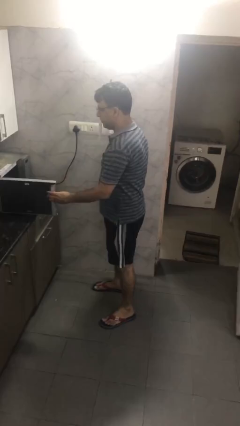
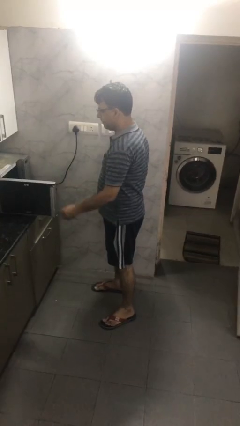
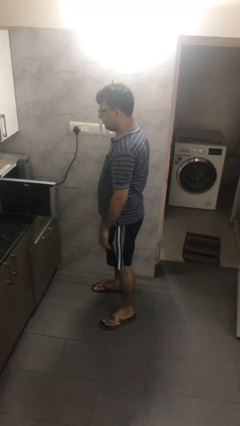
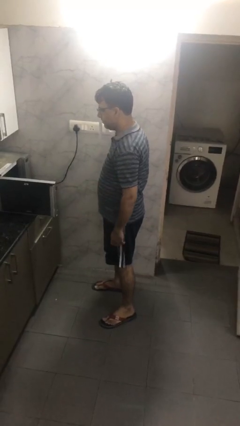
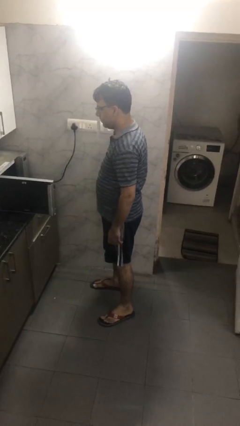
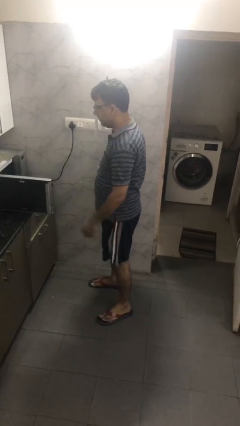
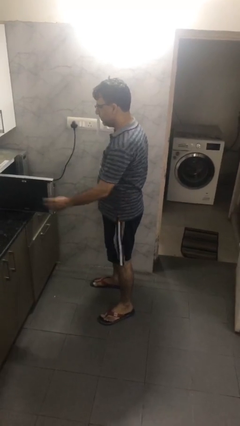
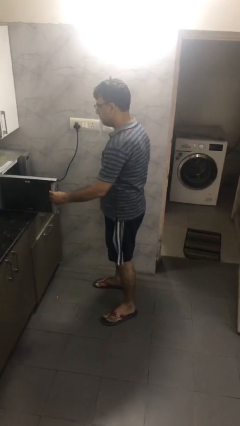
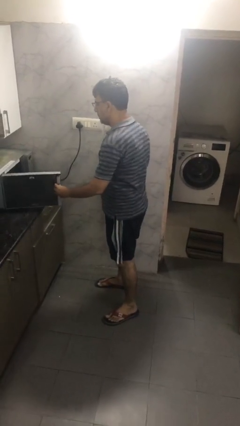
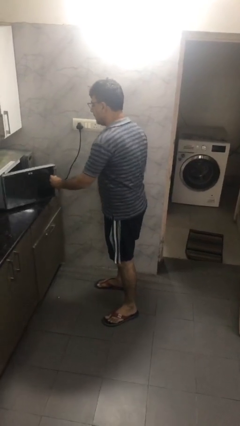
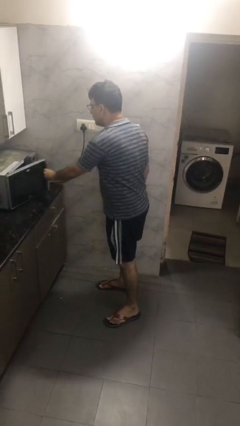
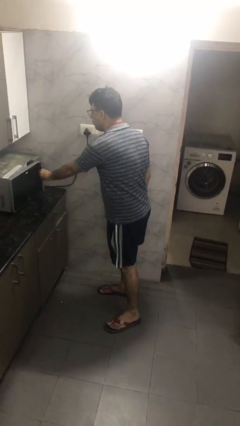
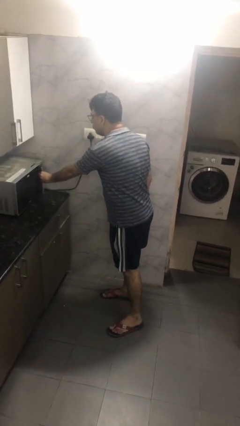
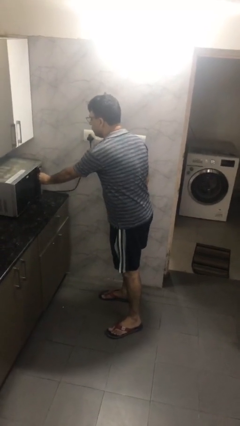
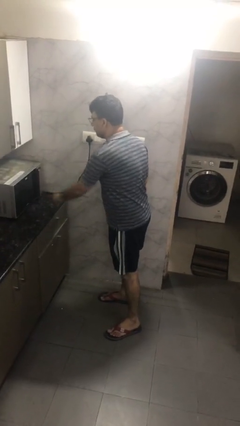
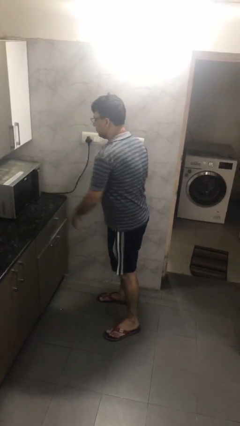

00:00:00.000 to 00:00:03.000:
person closes microwave

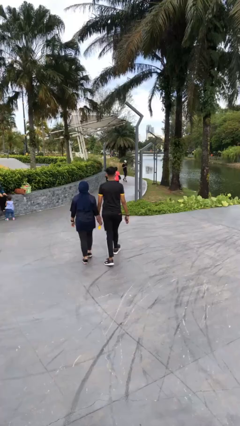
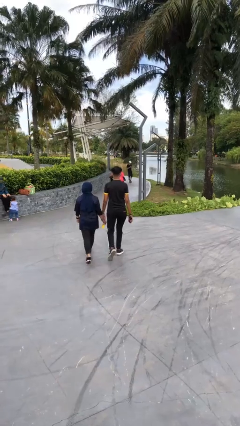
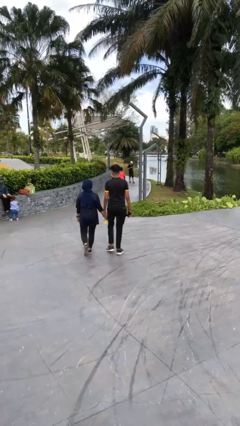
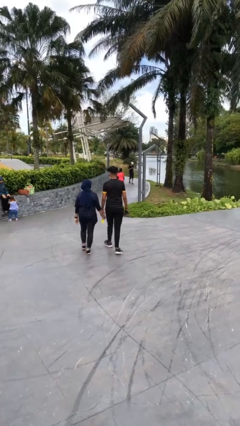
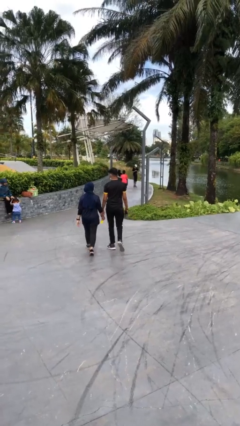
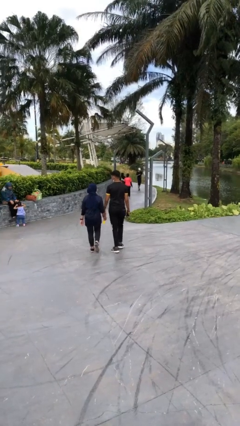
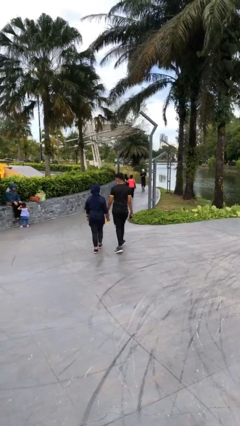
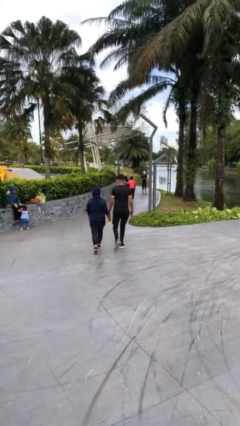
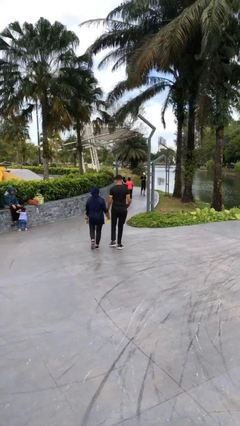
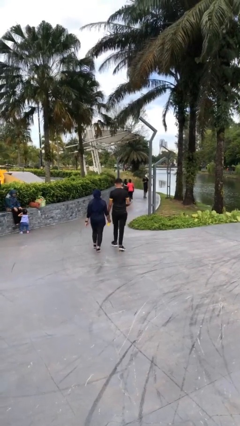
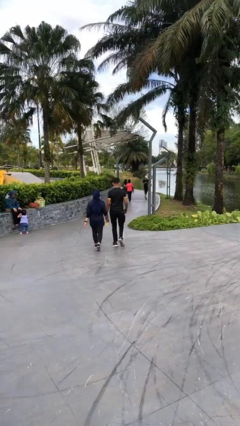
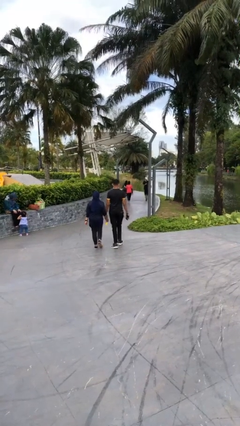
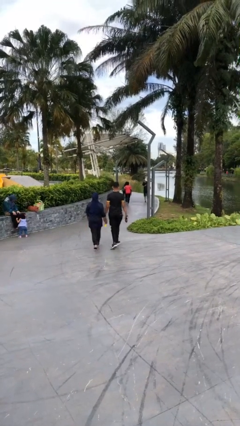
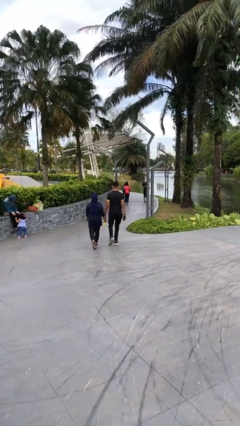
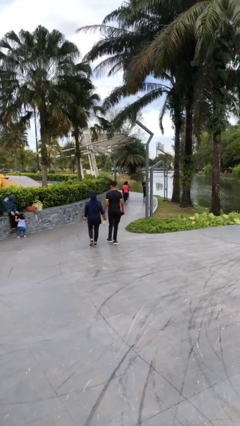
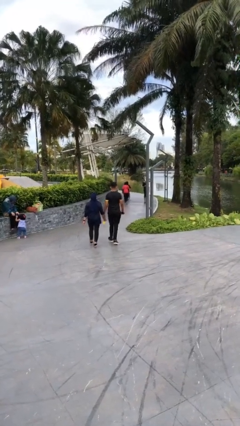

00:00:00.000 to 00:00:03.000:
person holds hand

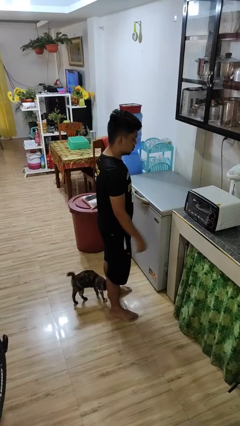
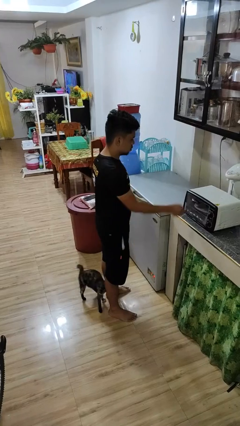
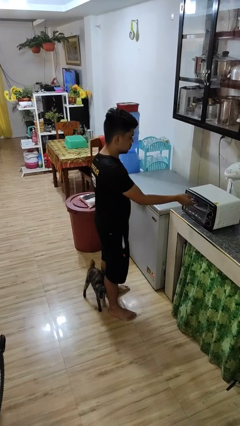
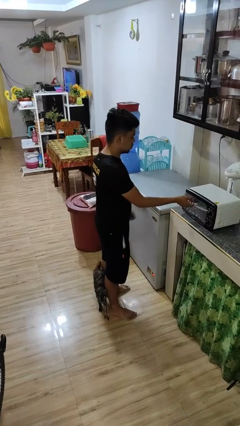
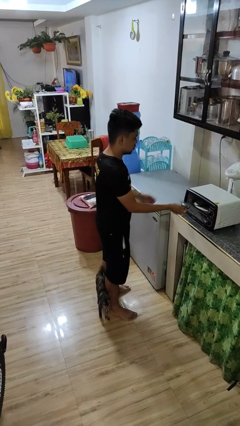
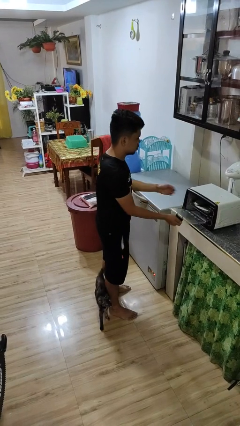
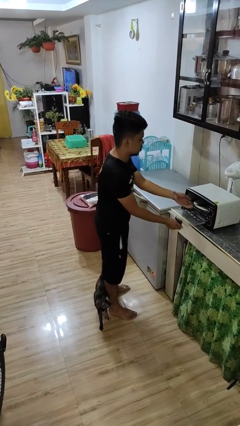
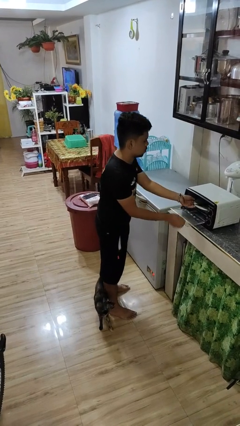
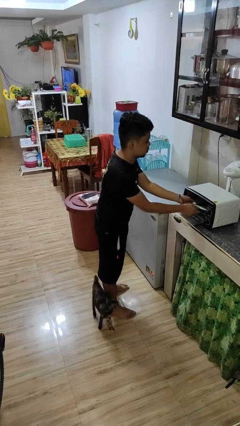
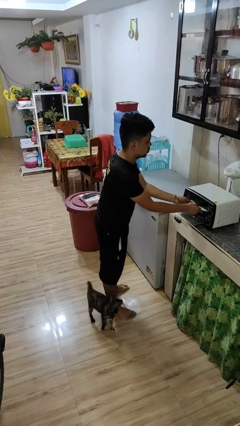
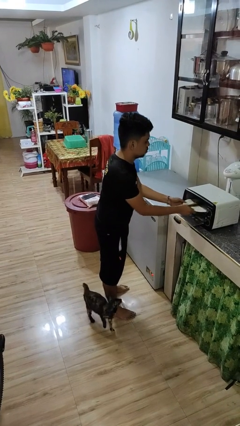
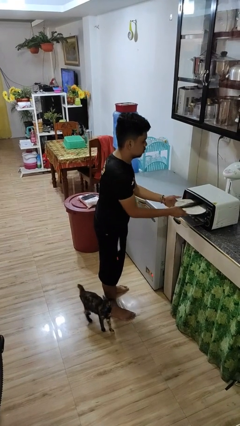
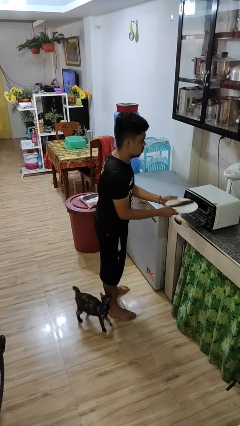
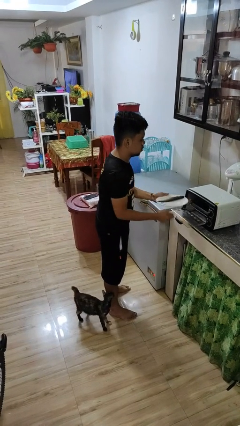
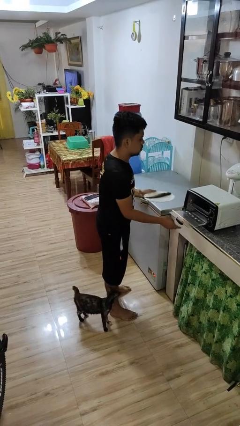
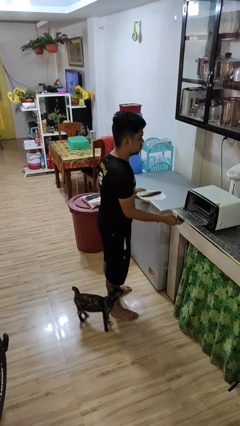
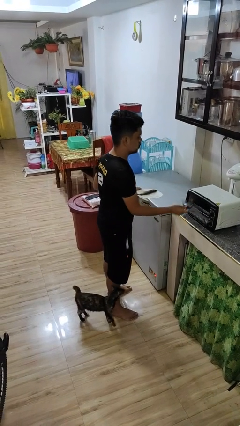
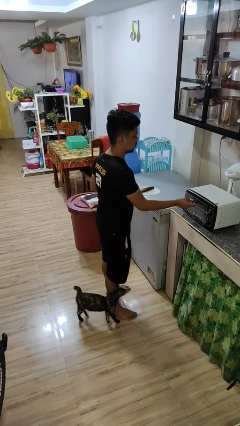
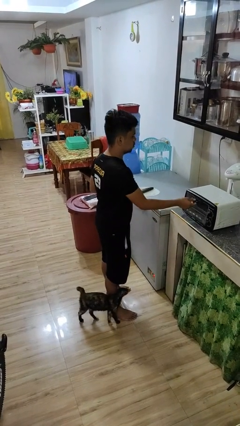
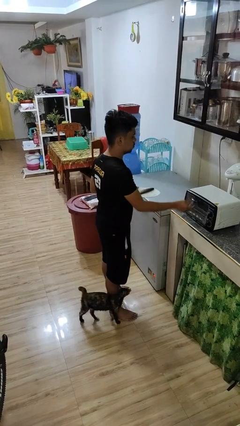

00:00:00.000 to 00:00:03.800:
person takes object from microwave

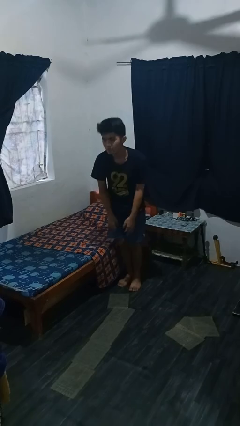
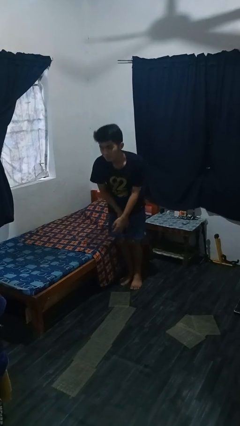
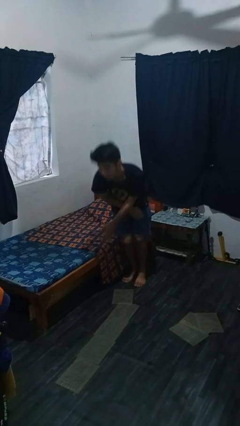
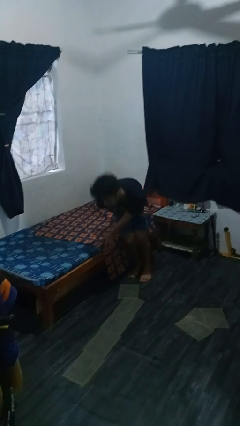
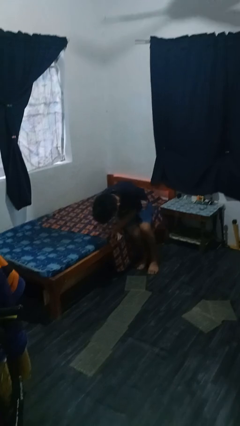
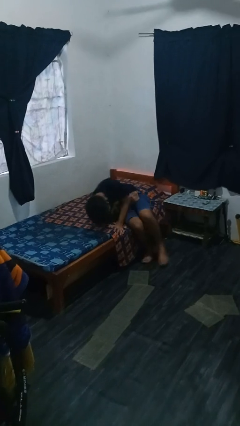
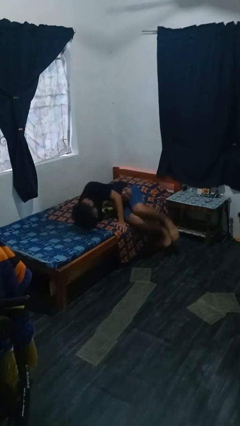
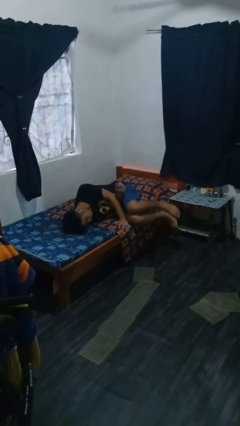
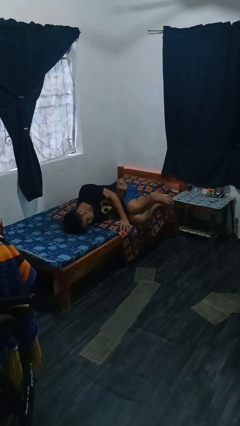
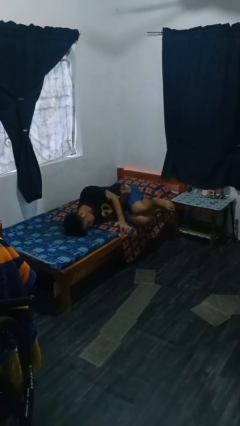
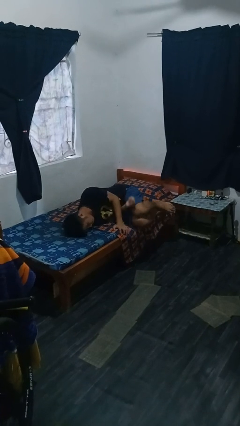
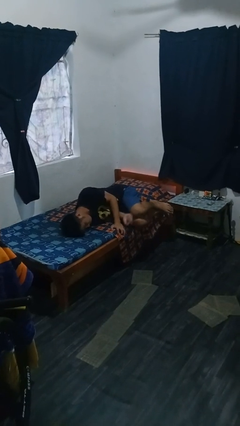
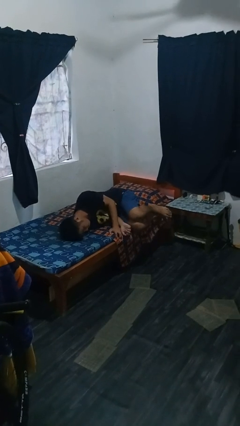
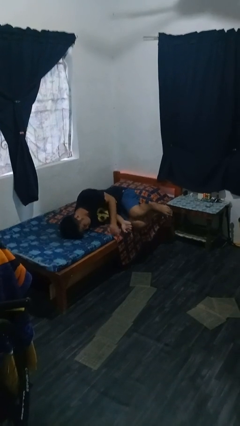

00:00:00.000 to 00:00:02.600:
person lies down on bed

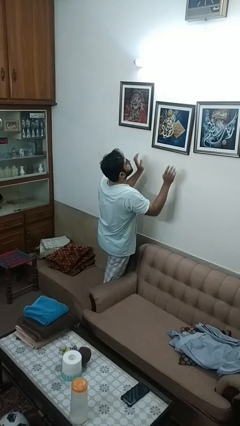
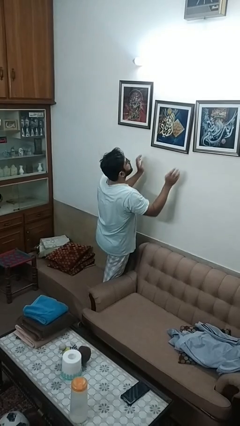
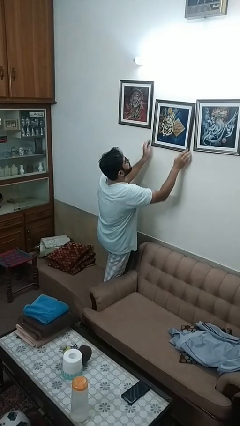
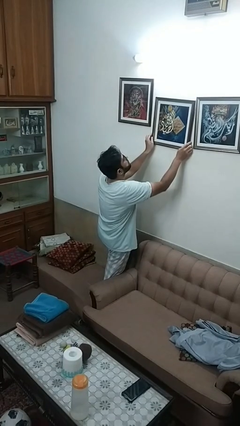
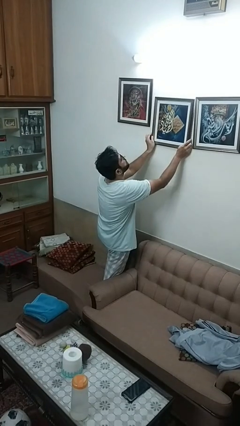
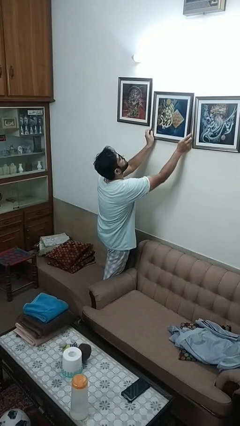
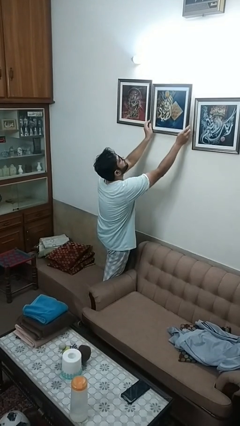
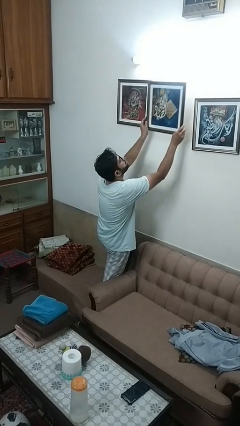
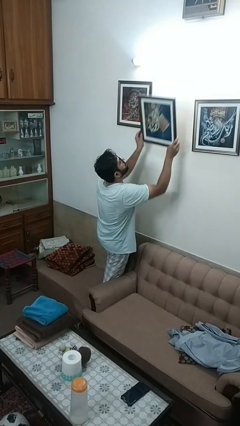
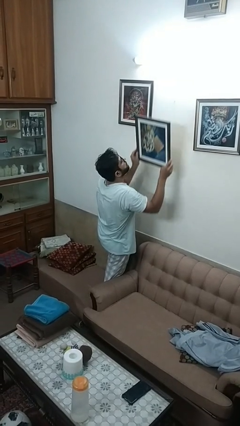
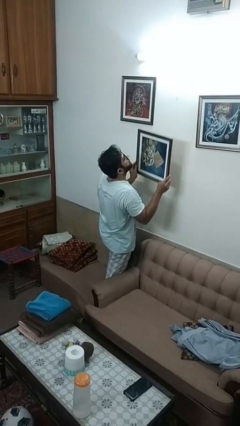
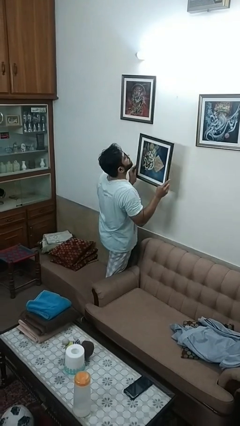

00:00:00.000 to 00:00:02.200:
person takes down picture frame

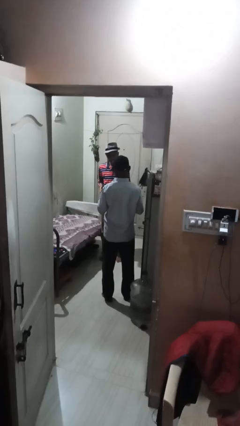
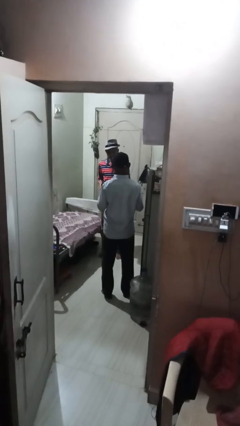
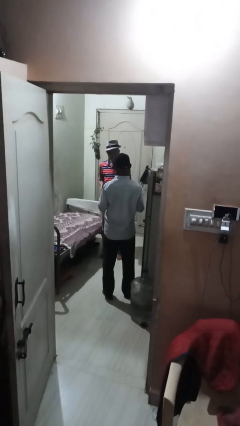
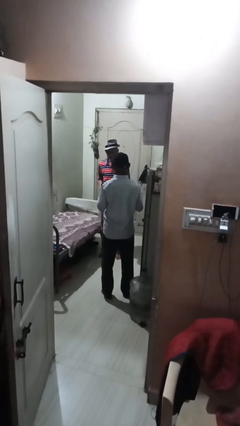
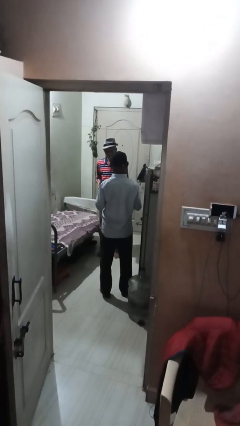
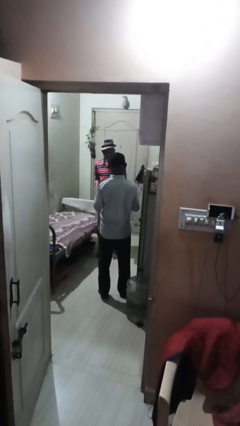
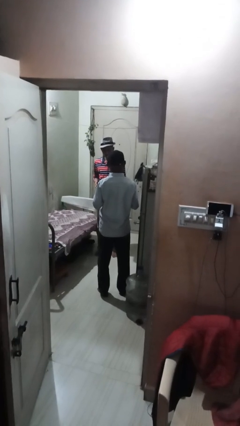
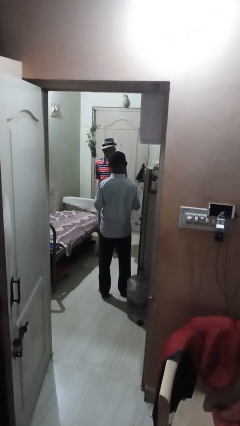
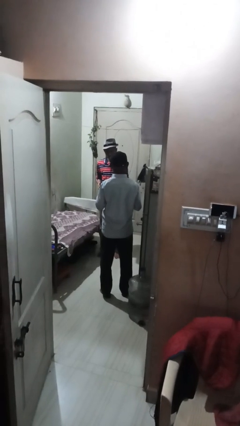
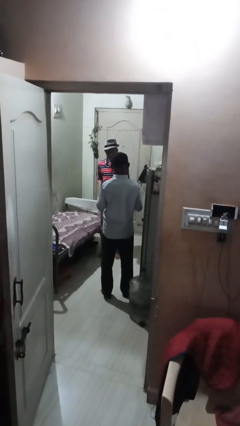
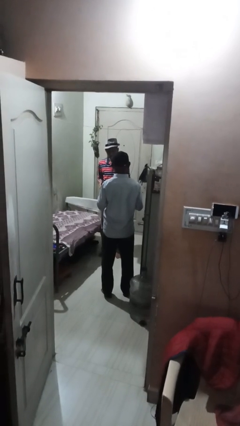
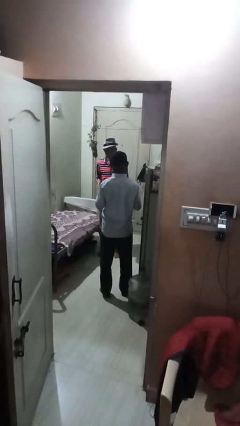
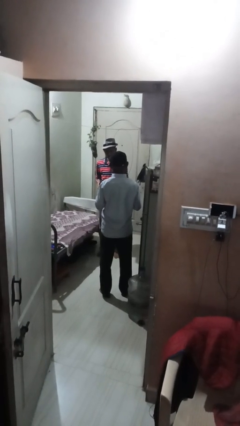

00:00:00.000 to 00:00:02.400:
person throws object to person
